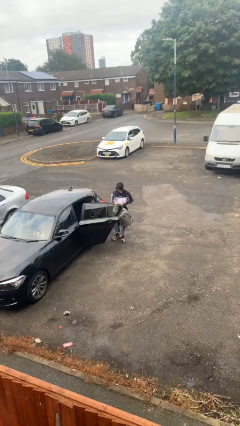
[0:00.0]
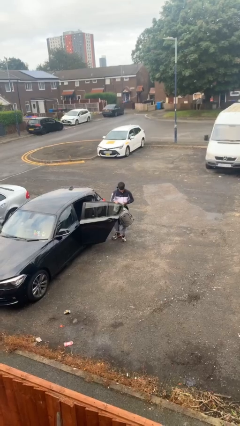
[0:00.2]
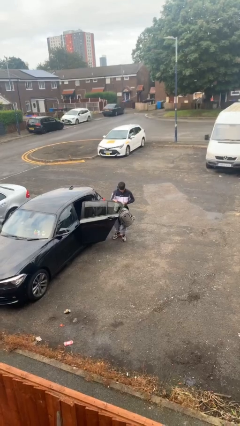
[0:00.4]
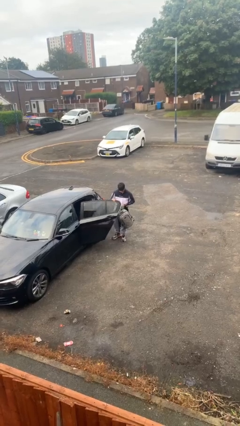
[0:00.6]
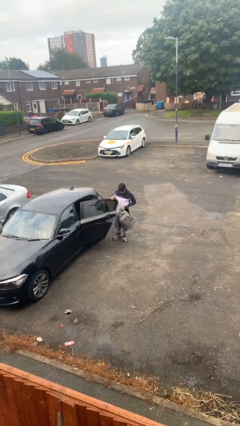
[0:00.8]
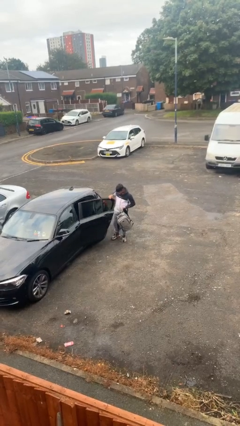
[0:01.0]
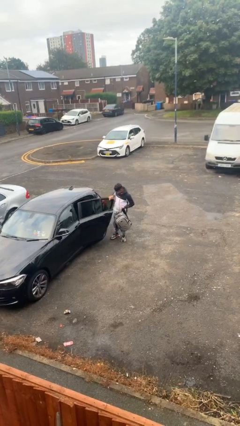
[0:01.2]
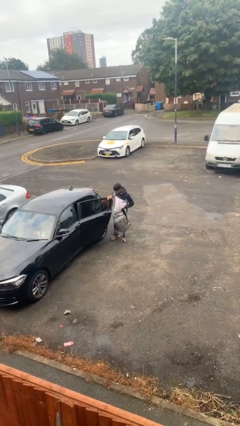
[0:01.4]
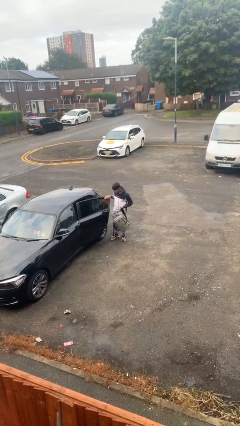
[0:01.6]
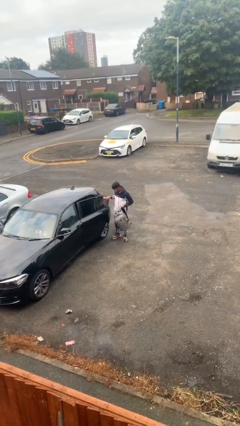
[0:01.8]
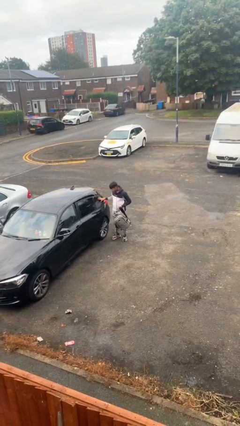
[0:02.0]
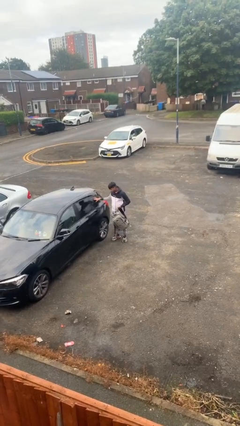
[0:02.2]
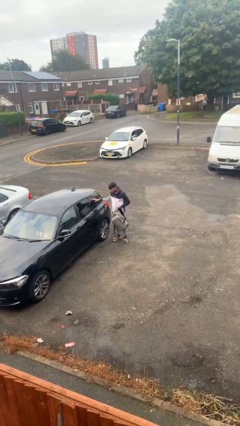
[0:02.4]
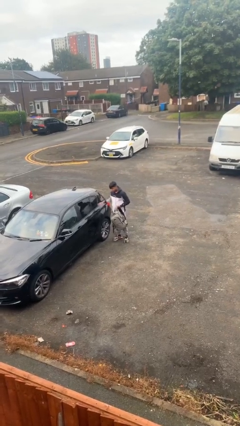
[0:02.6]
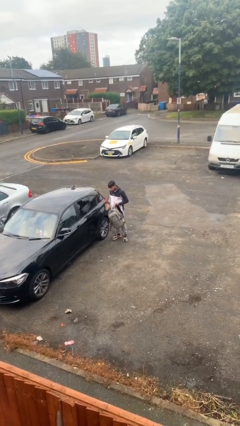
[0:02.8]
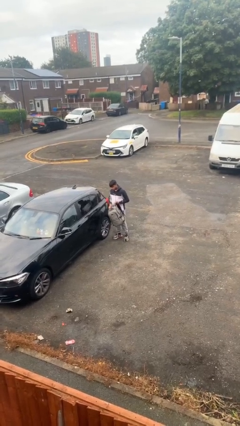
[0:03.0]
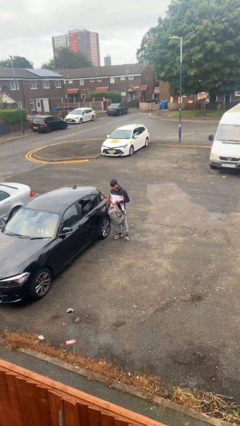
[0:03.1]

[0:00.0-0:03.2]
person closes car door

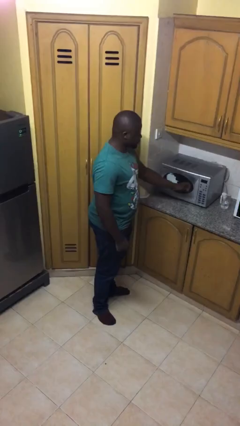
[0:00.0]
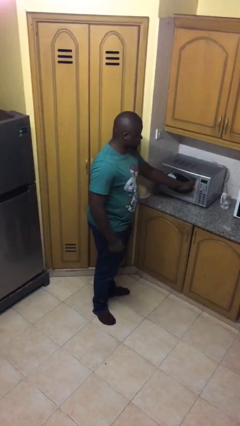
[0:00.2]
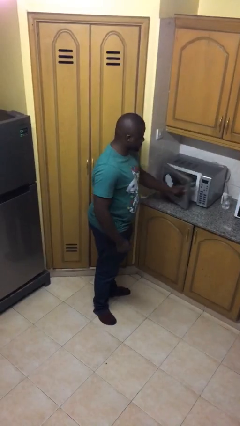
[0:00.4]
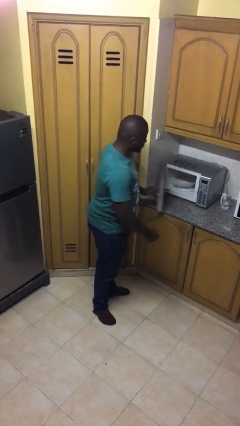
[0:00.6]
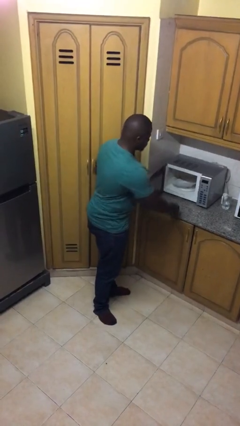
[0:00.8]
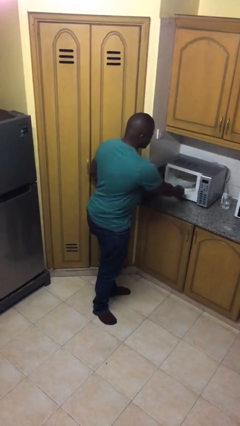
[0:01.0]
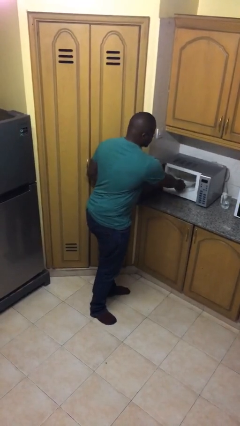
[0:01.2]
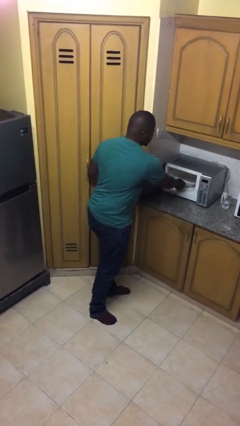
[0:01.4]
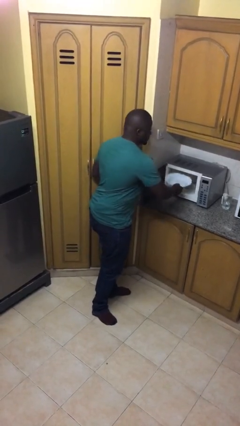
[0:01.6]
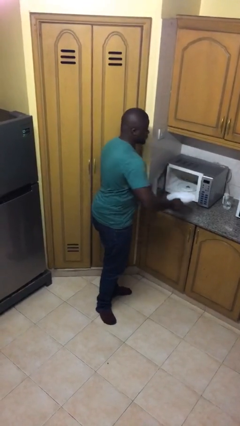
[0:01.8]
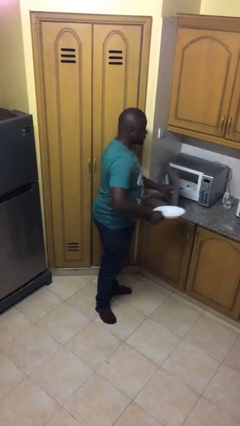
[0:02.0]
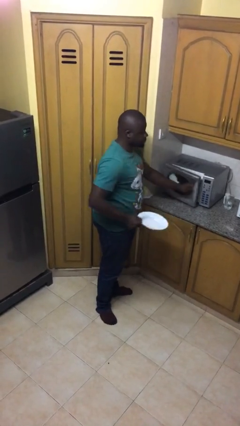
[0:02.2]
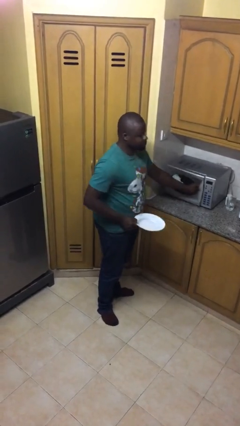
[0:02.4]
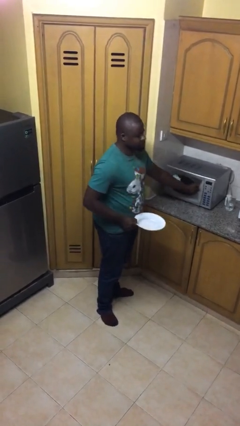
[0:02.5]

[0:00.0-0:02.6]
person takes object from microwave

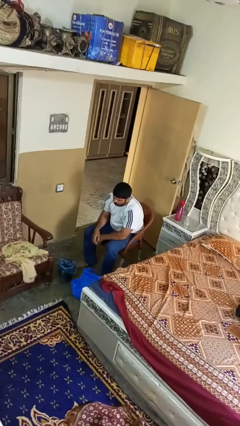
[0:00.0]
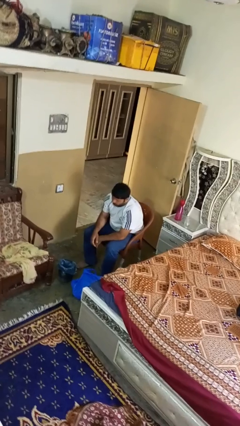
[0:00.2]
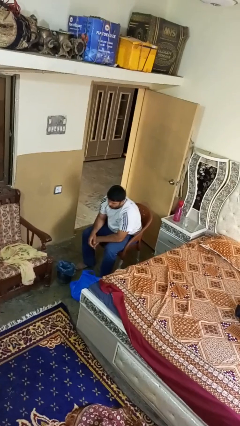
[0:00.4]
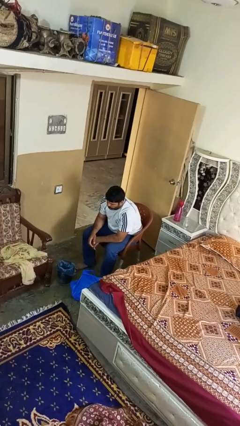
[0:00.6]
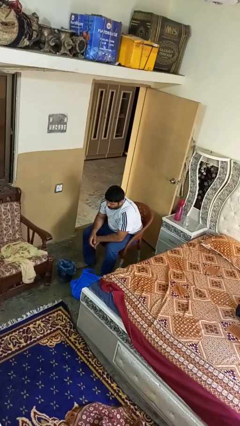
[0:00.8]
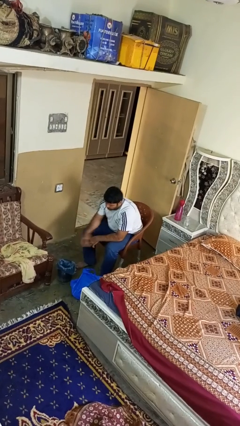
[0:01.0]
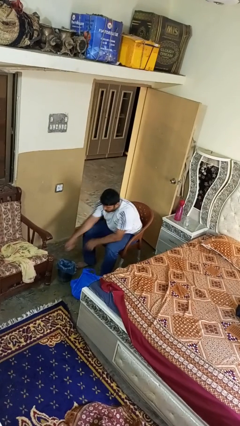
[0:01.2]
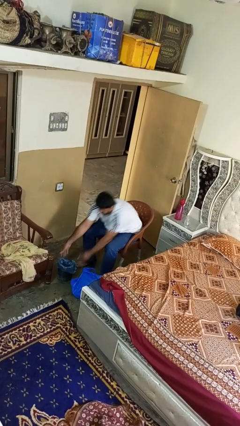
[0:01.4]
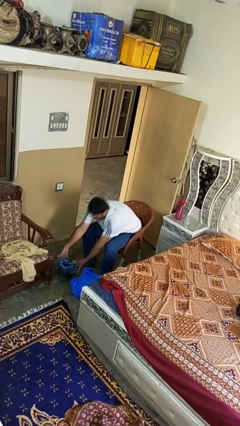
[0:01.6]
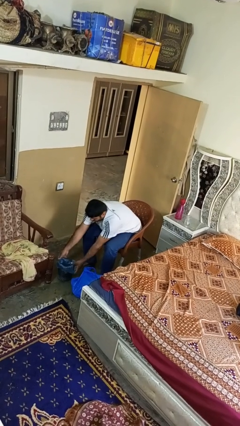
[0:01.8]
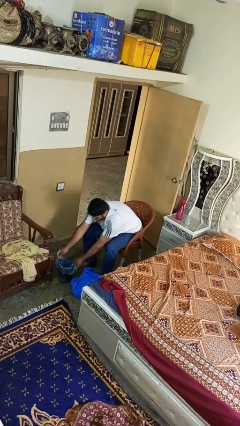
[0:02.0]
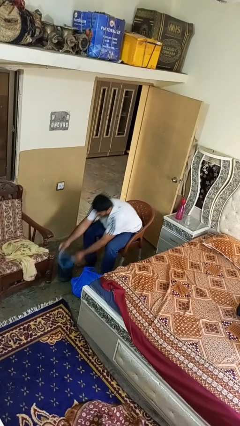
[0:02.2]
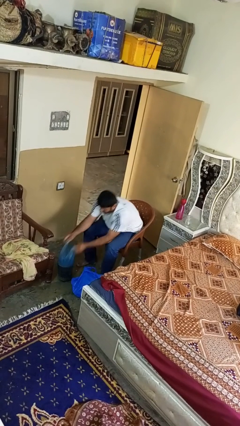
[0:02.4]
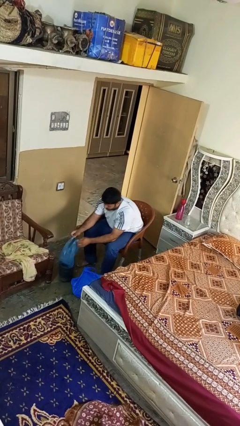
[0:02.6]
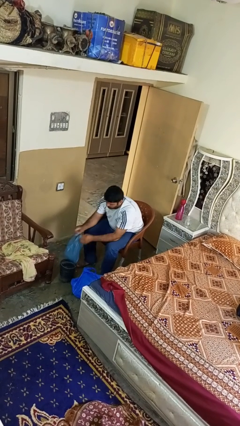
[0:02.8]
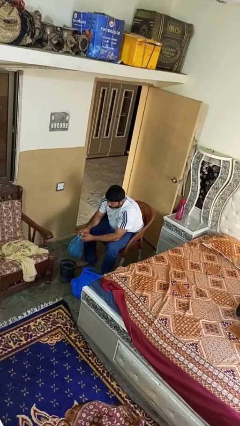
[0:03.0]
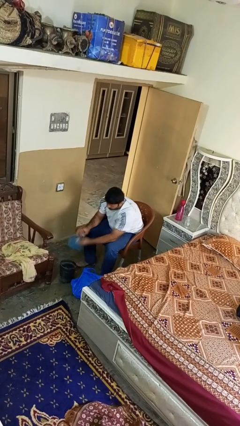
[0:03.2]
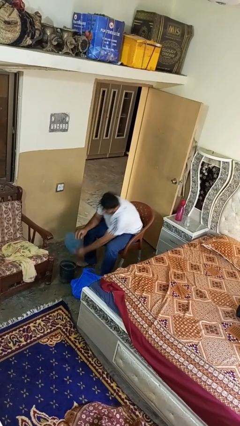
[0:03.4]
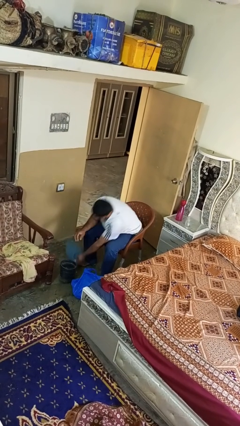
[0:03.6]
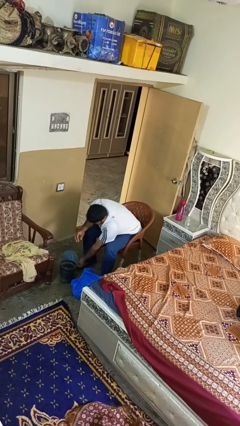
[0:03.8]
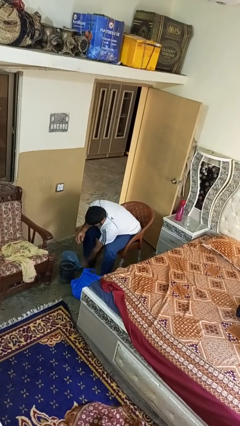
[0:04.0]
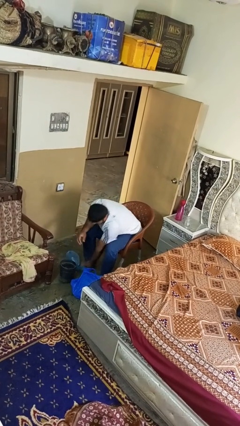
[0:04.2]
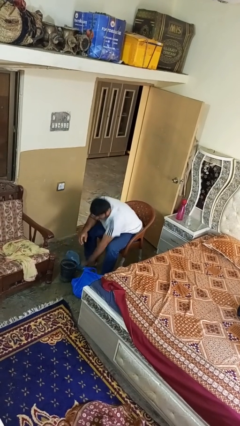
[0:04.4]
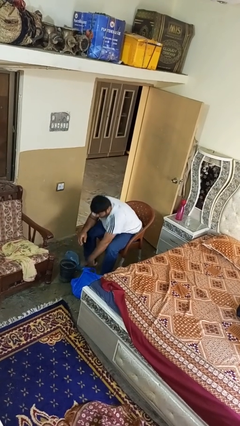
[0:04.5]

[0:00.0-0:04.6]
person removes trashbag from trashcan

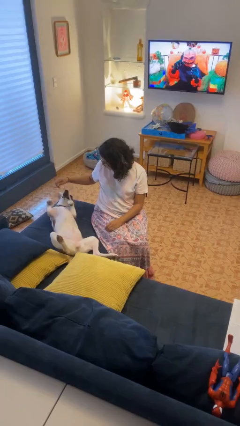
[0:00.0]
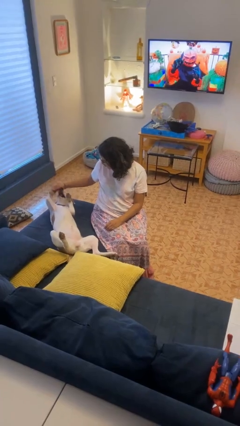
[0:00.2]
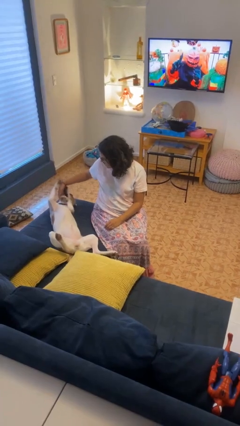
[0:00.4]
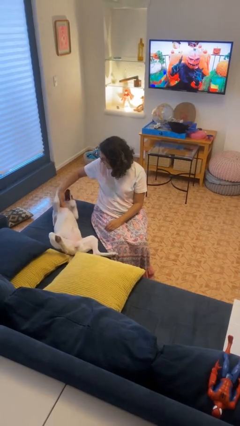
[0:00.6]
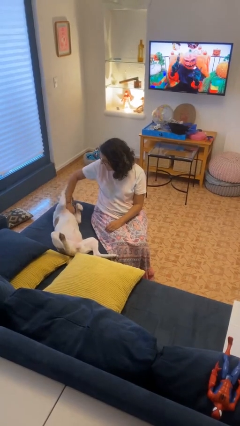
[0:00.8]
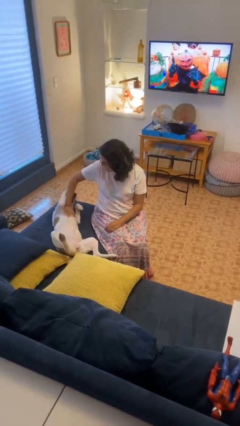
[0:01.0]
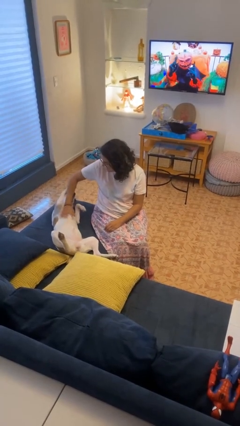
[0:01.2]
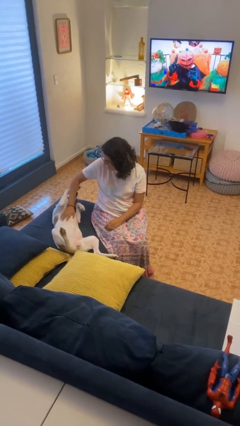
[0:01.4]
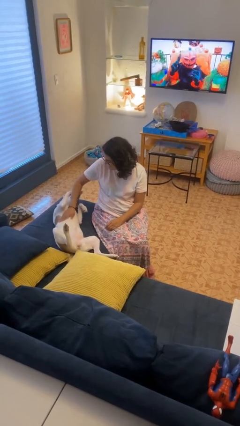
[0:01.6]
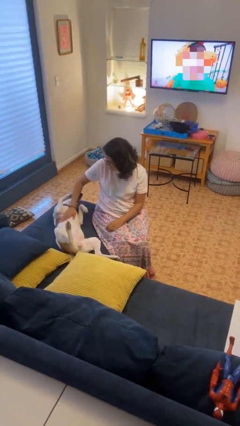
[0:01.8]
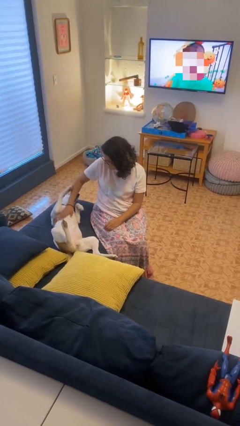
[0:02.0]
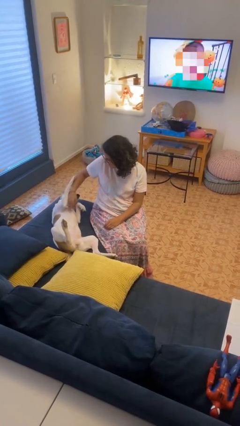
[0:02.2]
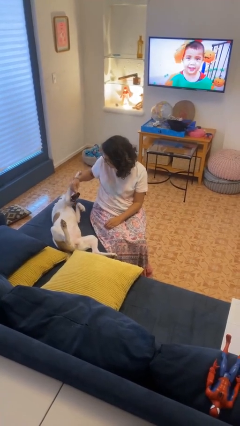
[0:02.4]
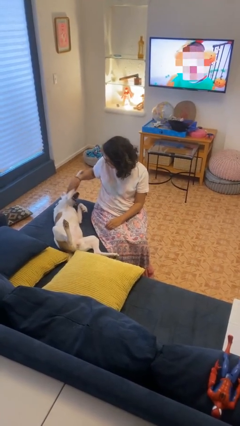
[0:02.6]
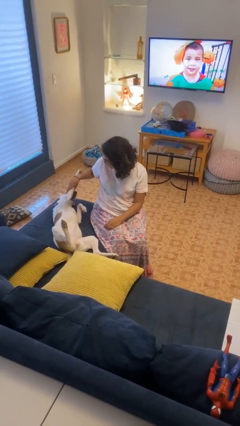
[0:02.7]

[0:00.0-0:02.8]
person pets dog

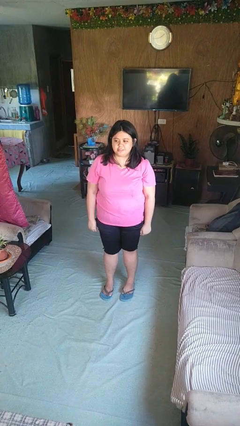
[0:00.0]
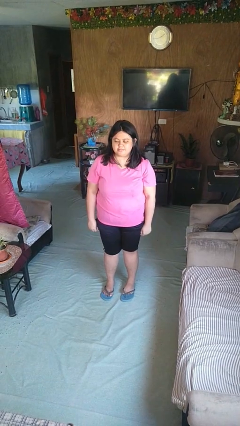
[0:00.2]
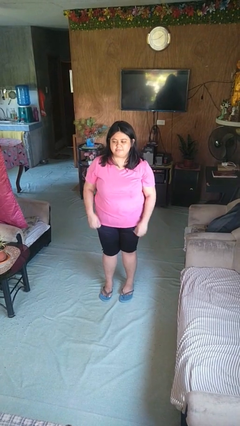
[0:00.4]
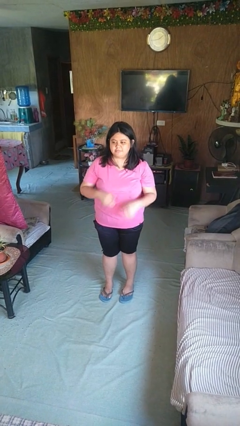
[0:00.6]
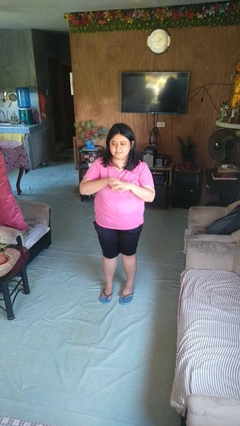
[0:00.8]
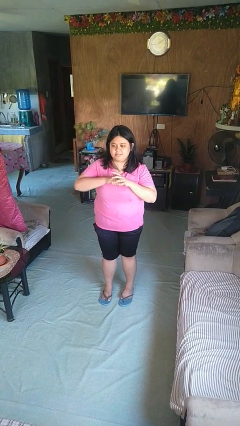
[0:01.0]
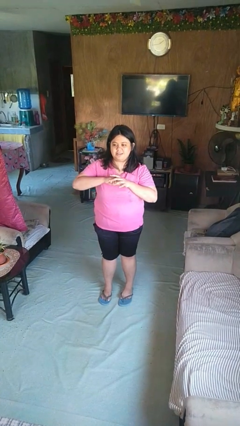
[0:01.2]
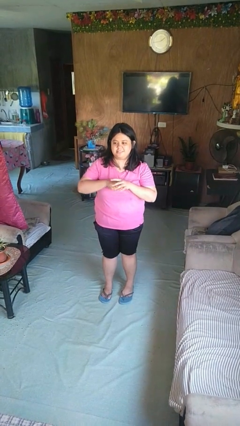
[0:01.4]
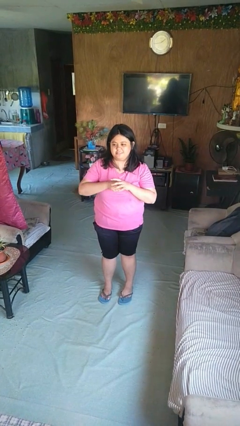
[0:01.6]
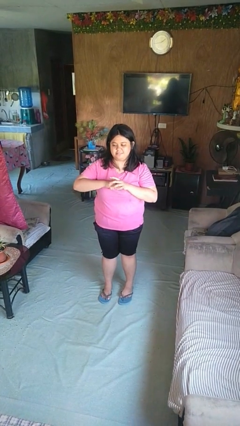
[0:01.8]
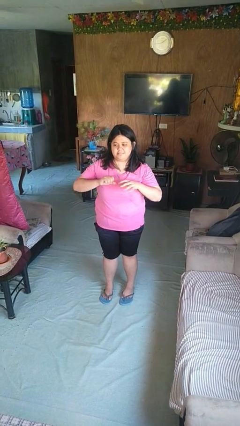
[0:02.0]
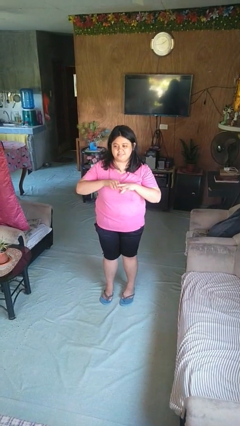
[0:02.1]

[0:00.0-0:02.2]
person cracks knuckles

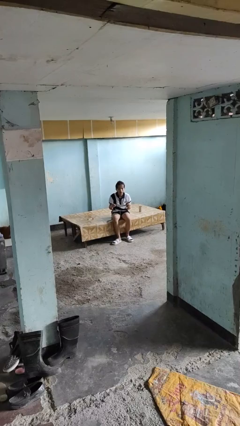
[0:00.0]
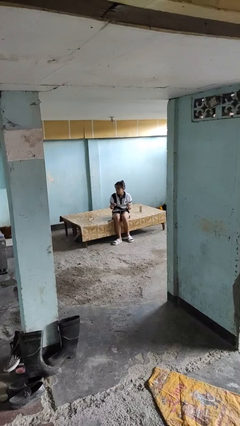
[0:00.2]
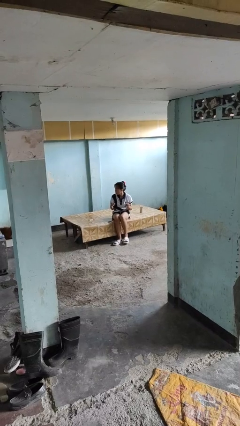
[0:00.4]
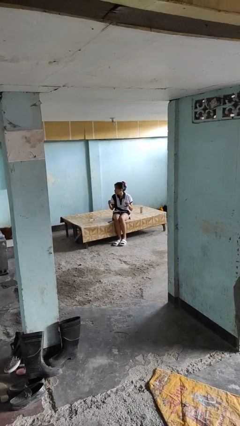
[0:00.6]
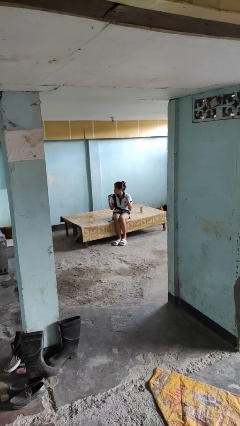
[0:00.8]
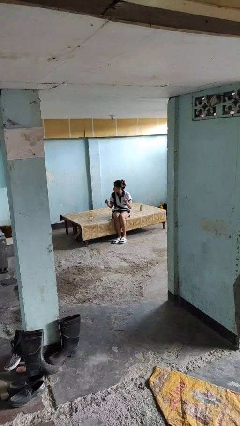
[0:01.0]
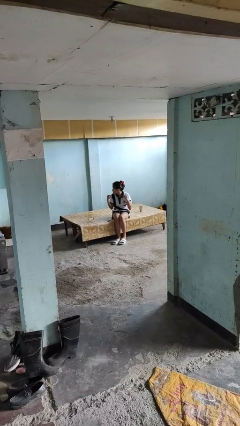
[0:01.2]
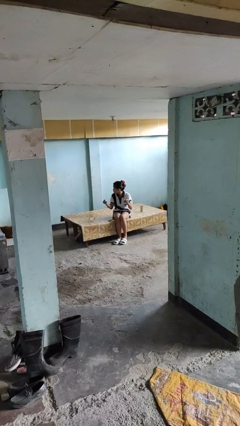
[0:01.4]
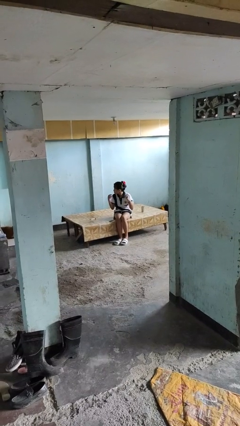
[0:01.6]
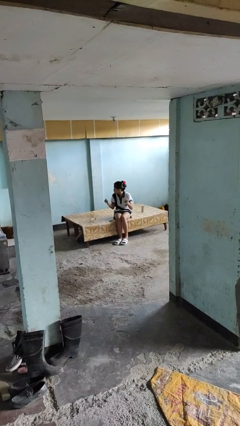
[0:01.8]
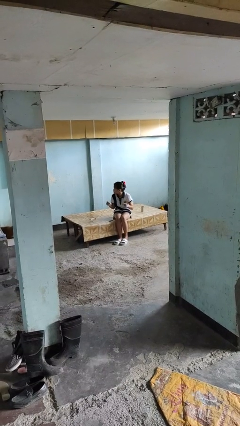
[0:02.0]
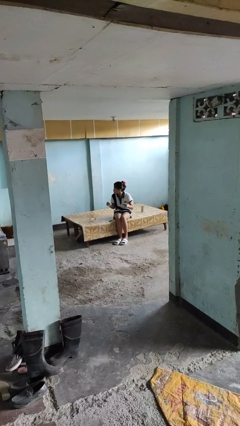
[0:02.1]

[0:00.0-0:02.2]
person snaps fingers
